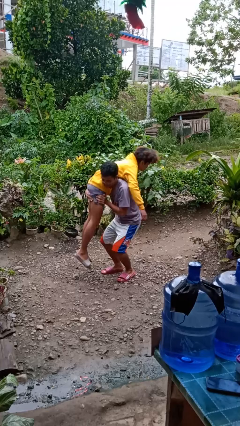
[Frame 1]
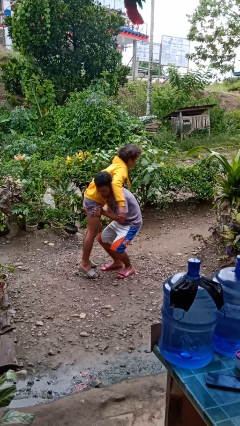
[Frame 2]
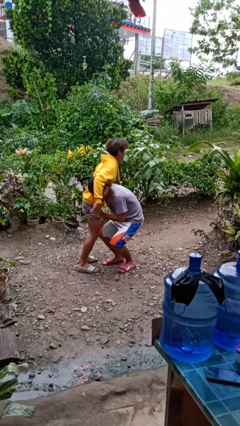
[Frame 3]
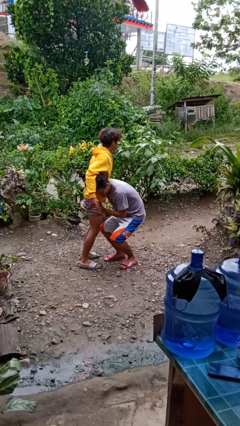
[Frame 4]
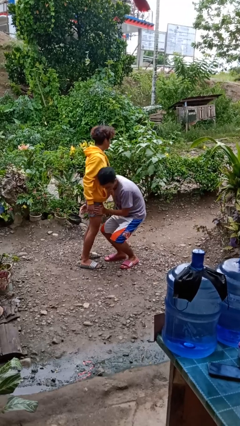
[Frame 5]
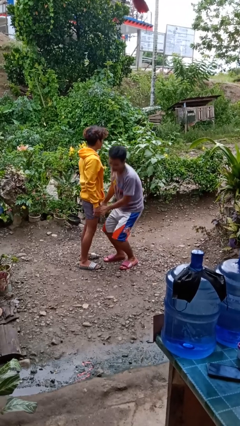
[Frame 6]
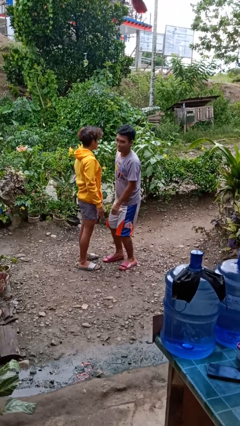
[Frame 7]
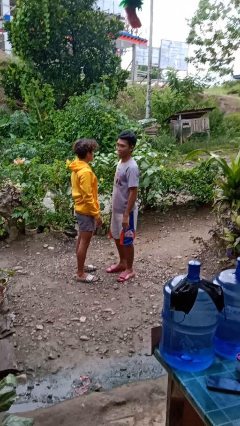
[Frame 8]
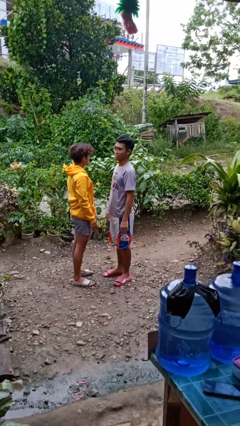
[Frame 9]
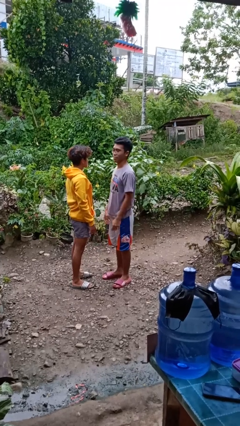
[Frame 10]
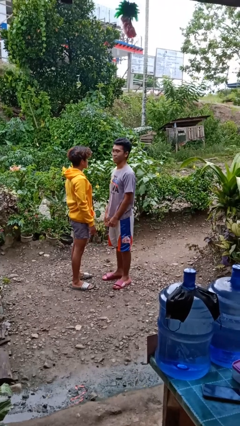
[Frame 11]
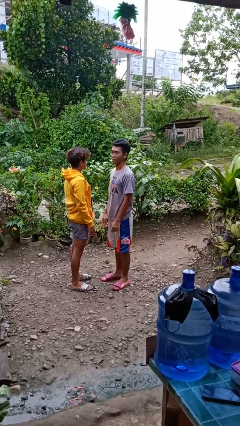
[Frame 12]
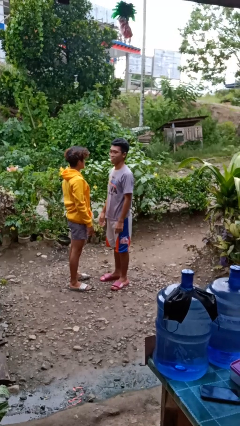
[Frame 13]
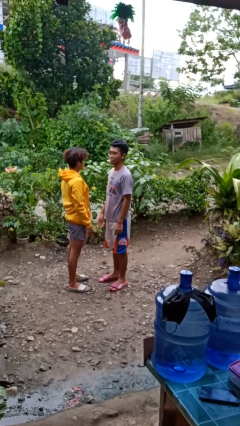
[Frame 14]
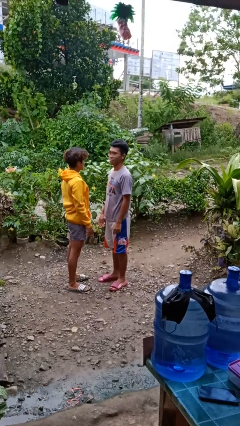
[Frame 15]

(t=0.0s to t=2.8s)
person puts down person

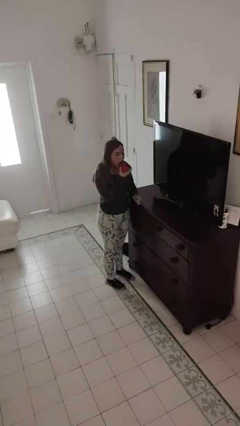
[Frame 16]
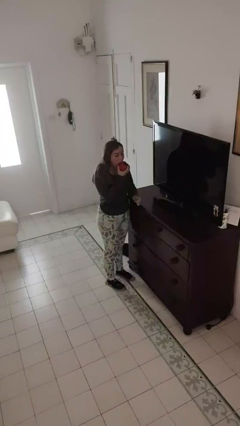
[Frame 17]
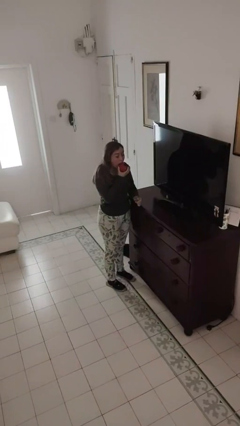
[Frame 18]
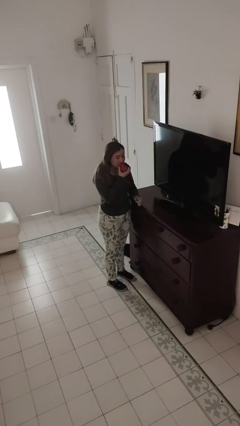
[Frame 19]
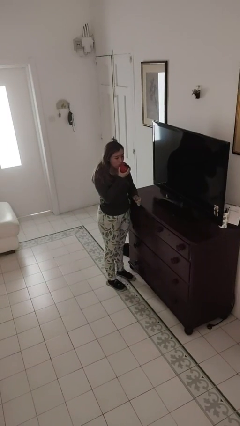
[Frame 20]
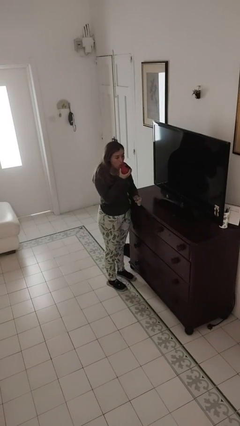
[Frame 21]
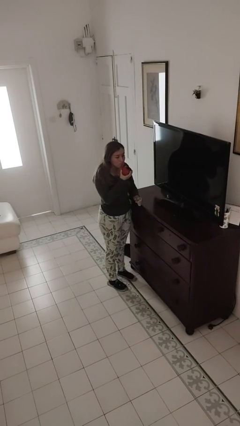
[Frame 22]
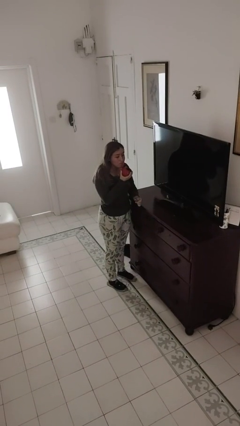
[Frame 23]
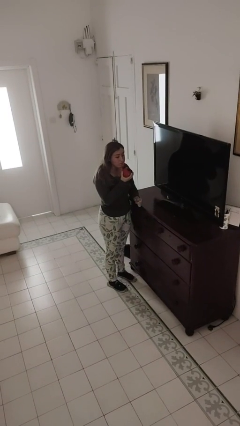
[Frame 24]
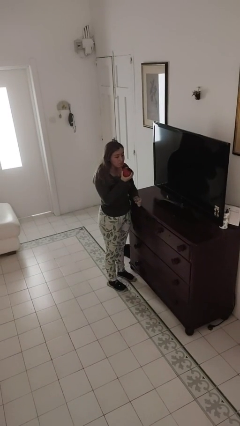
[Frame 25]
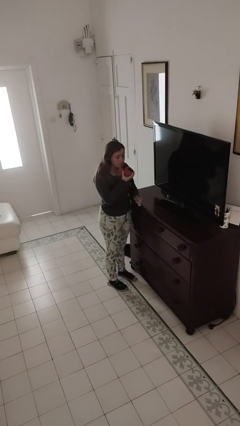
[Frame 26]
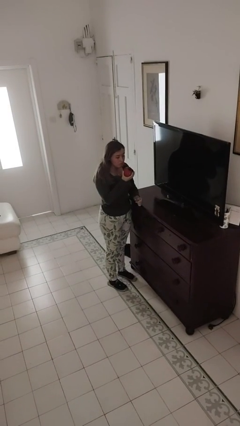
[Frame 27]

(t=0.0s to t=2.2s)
person eats apple

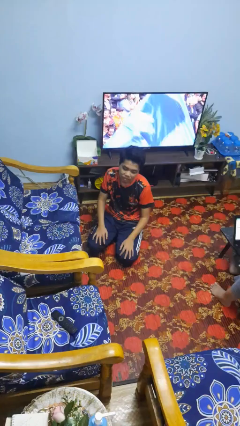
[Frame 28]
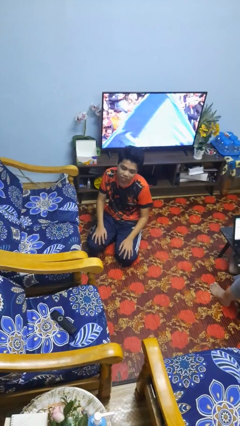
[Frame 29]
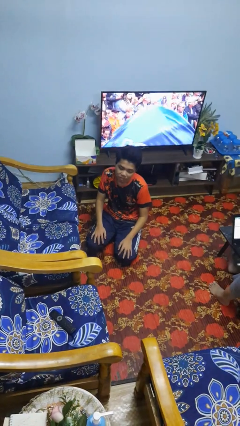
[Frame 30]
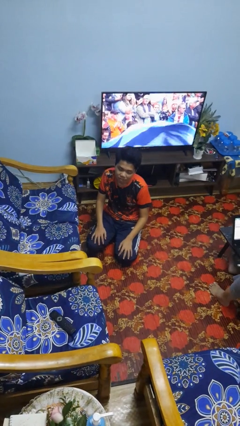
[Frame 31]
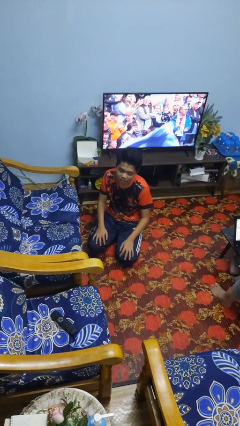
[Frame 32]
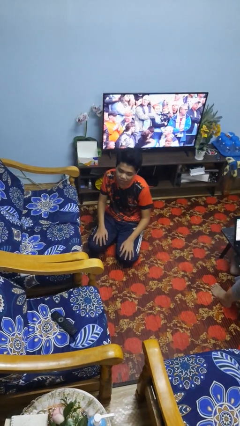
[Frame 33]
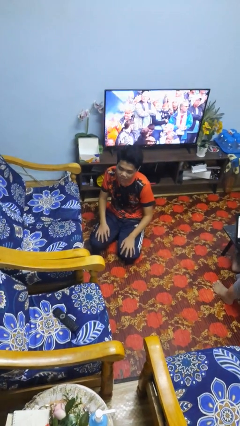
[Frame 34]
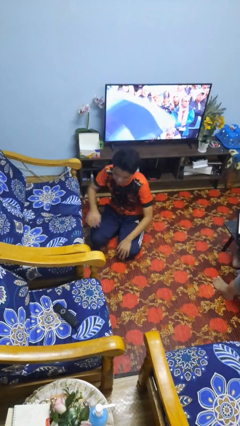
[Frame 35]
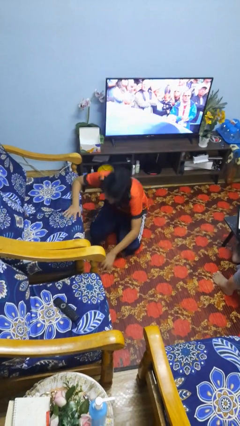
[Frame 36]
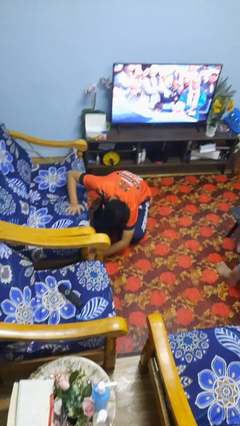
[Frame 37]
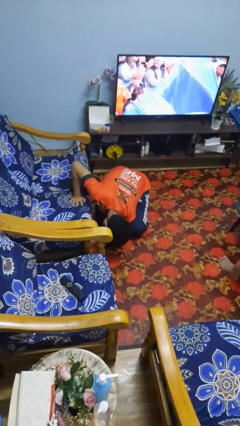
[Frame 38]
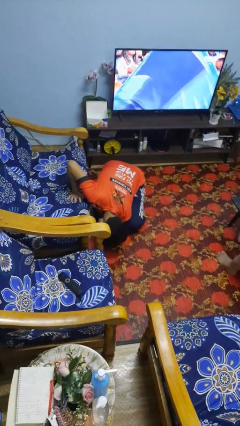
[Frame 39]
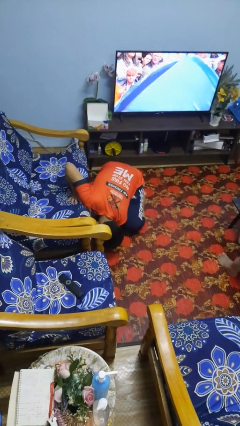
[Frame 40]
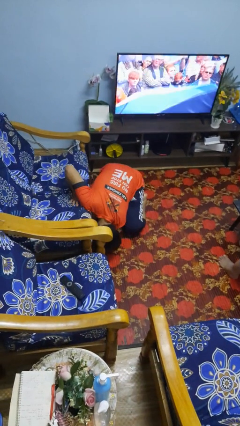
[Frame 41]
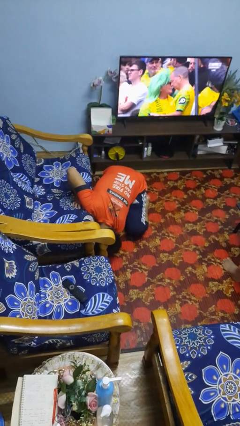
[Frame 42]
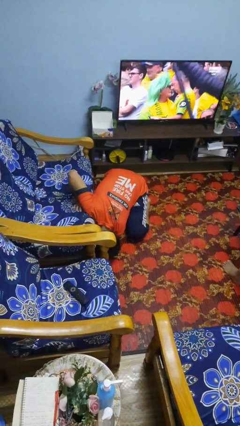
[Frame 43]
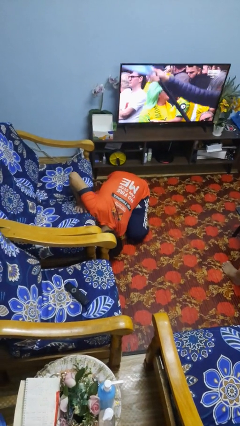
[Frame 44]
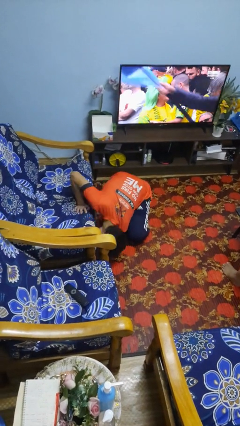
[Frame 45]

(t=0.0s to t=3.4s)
person searches under couch

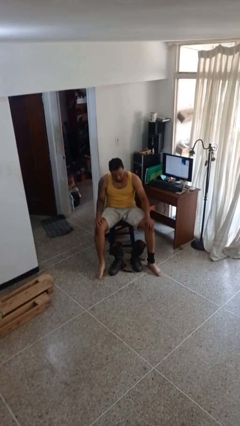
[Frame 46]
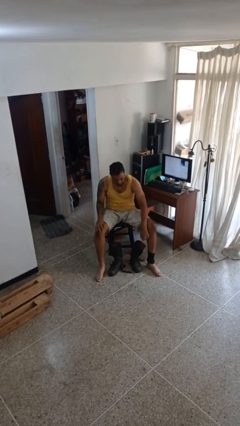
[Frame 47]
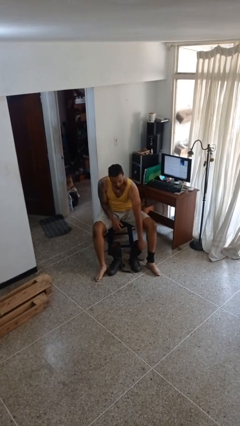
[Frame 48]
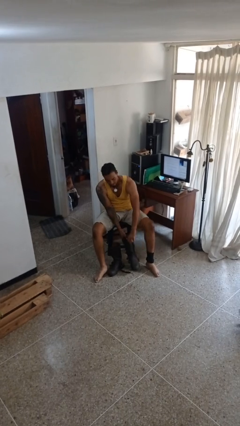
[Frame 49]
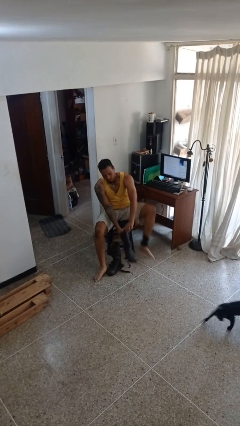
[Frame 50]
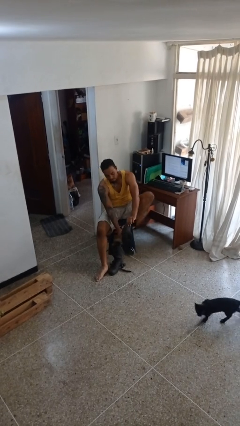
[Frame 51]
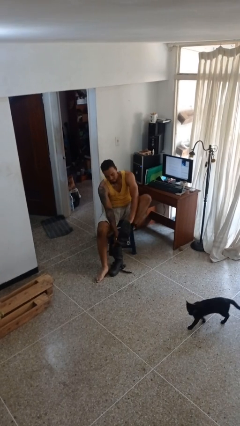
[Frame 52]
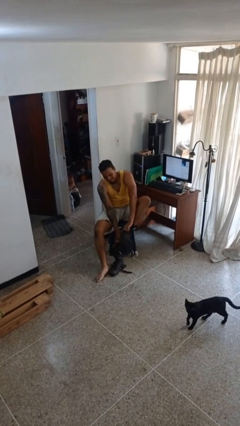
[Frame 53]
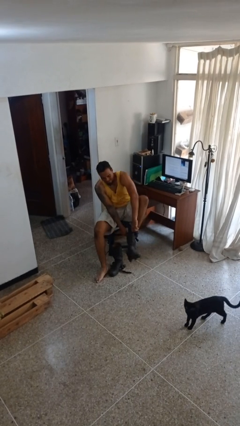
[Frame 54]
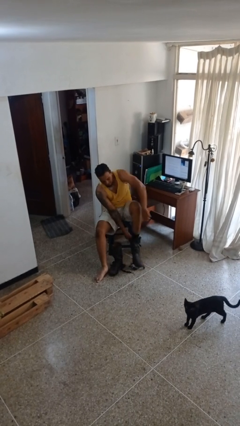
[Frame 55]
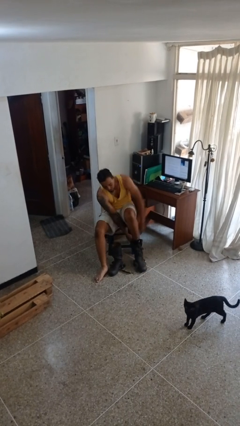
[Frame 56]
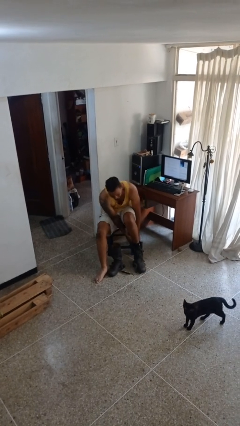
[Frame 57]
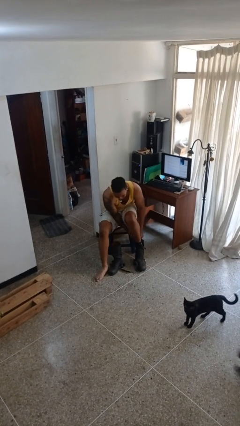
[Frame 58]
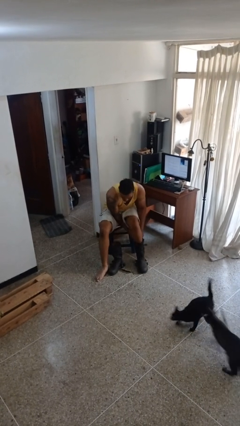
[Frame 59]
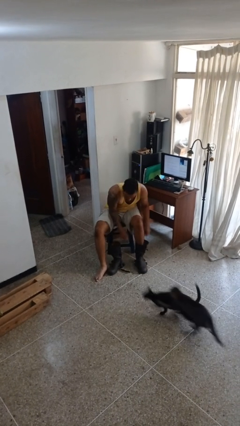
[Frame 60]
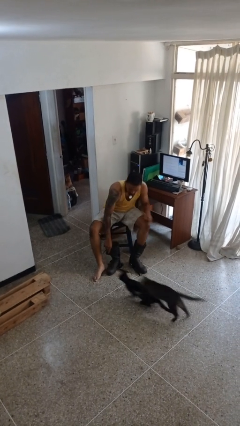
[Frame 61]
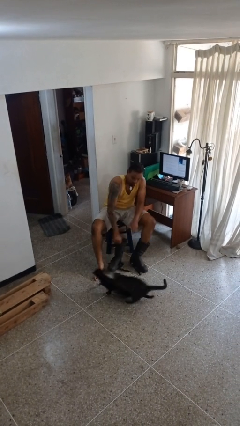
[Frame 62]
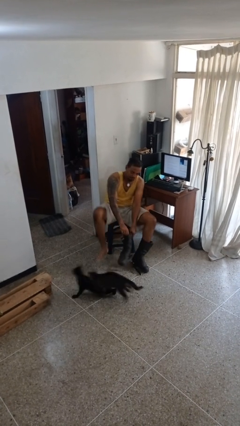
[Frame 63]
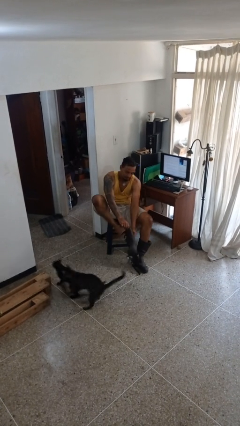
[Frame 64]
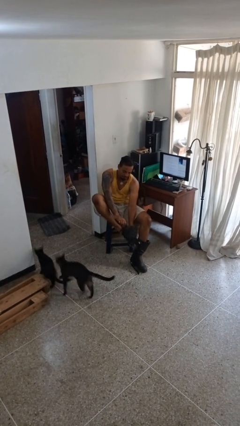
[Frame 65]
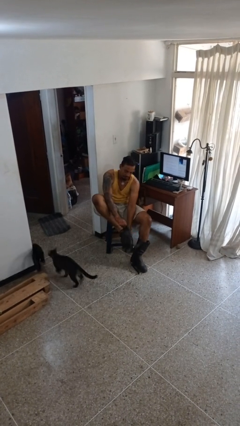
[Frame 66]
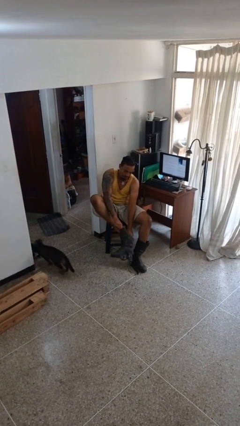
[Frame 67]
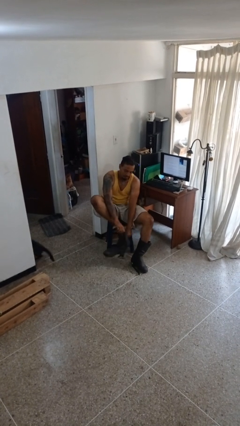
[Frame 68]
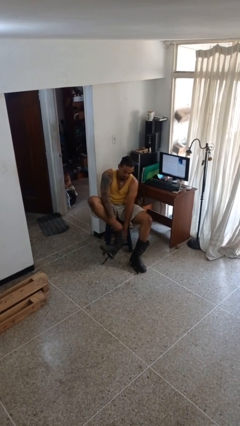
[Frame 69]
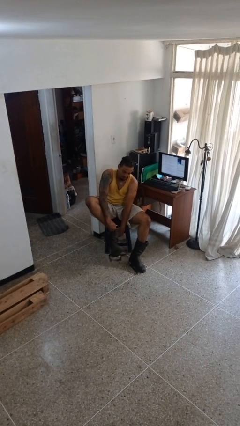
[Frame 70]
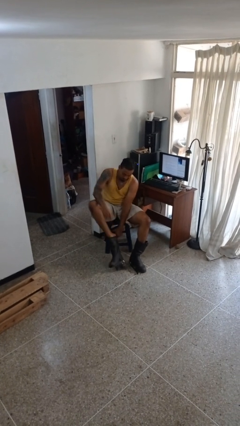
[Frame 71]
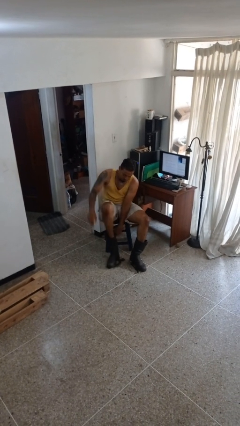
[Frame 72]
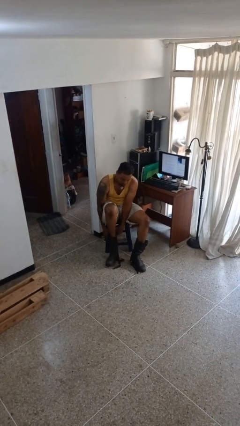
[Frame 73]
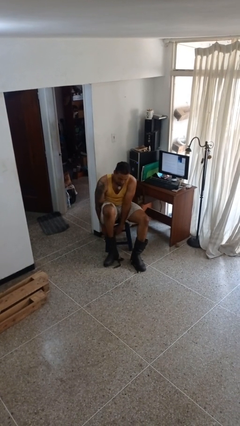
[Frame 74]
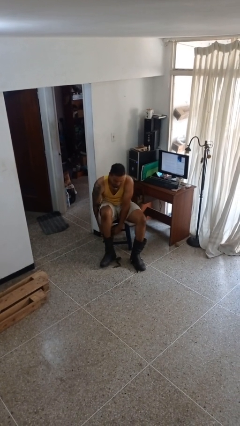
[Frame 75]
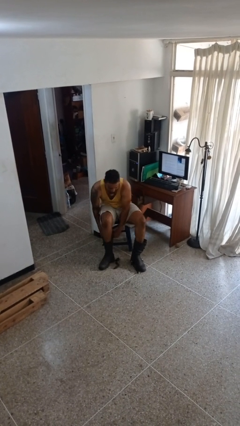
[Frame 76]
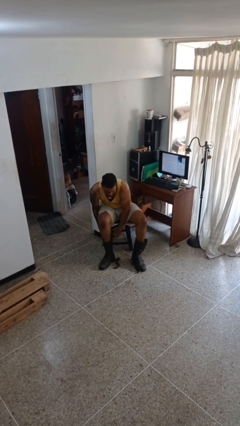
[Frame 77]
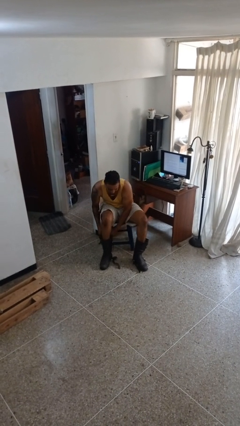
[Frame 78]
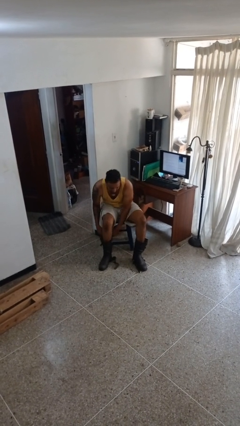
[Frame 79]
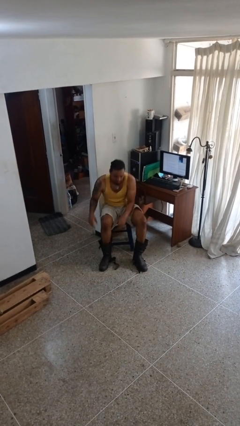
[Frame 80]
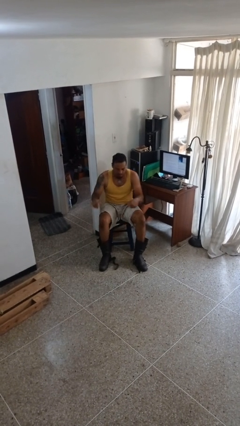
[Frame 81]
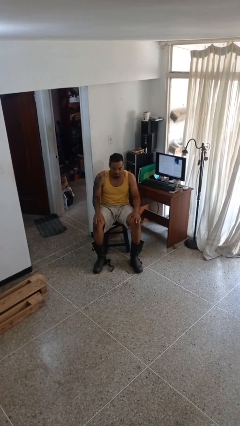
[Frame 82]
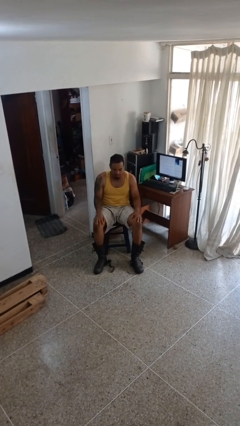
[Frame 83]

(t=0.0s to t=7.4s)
person puts on boots

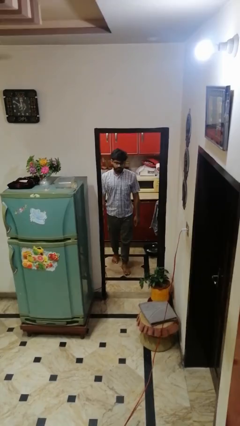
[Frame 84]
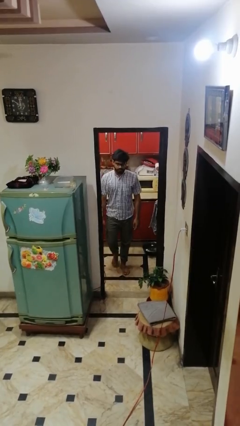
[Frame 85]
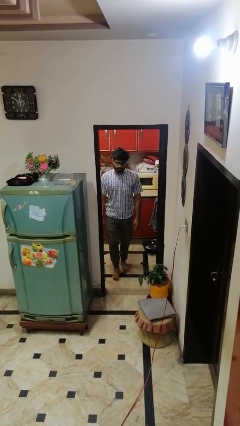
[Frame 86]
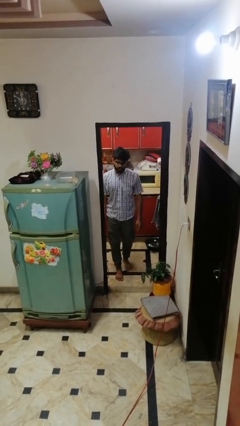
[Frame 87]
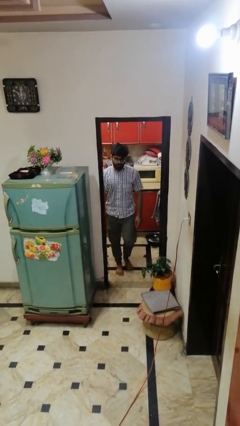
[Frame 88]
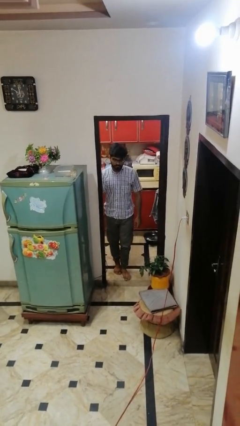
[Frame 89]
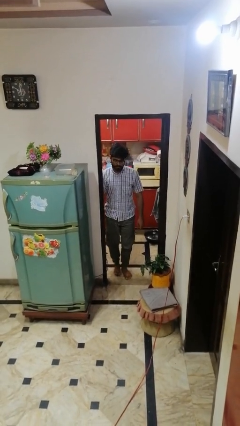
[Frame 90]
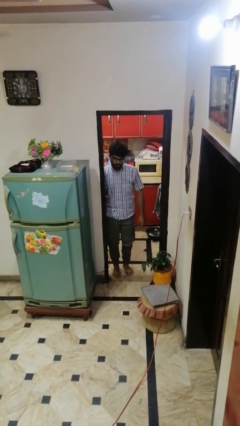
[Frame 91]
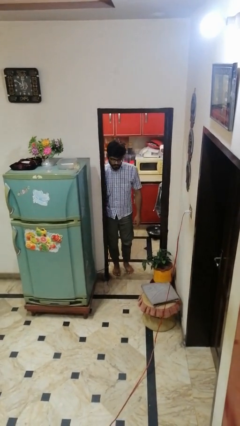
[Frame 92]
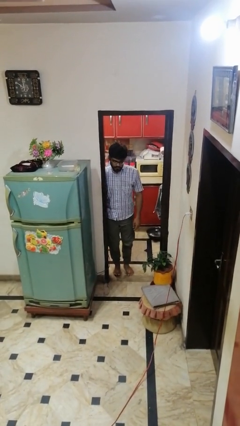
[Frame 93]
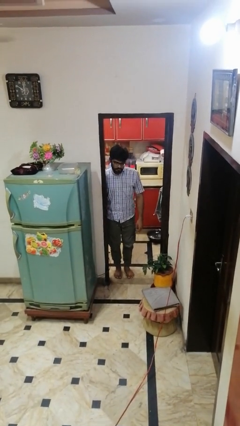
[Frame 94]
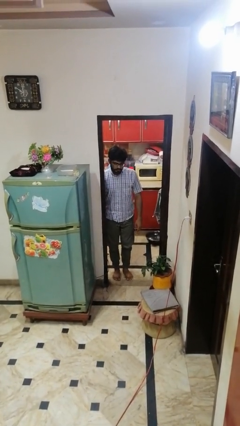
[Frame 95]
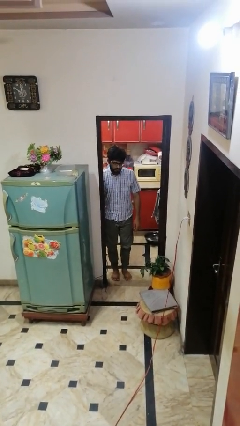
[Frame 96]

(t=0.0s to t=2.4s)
person bumps into wall
